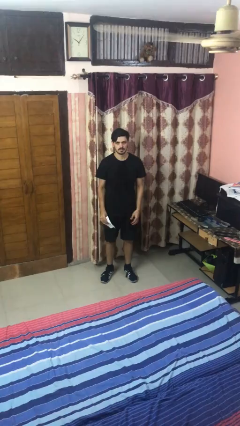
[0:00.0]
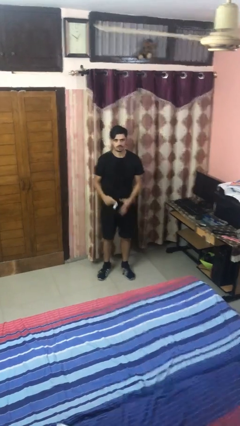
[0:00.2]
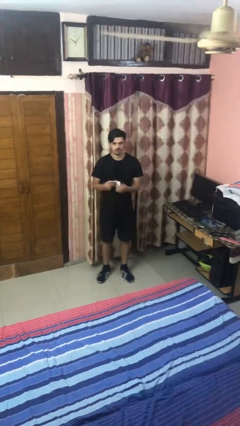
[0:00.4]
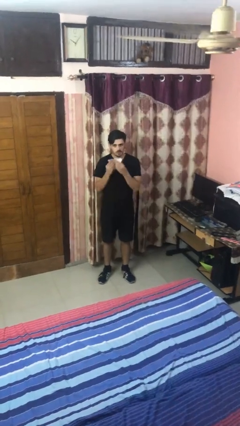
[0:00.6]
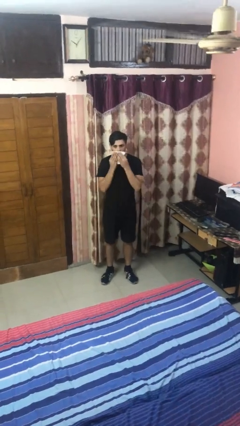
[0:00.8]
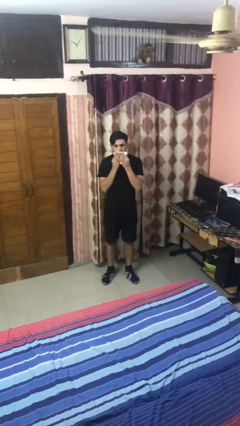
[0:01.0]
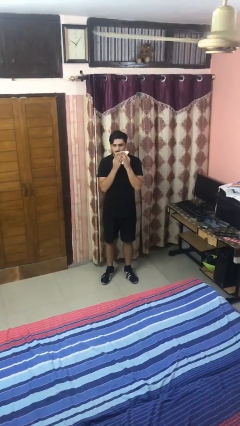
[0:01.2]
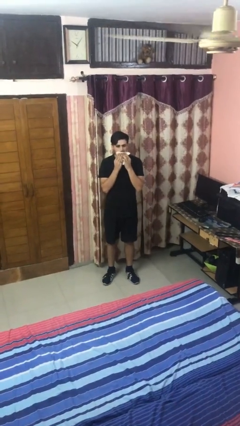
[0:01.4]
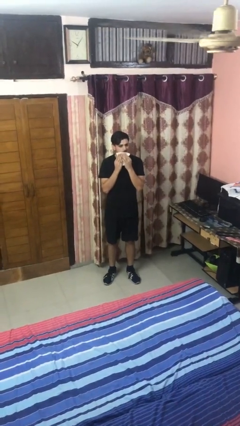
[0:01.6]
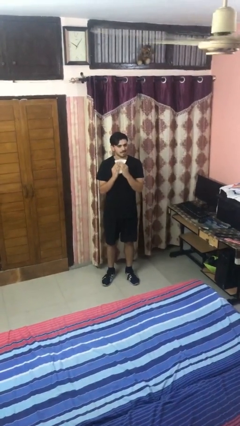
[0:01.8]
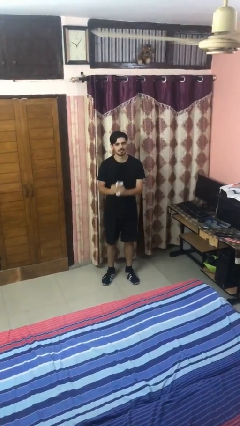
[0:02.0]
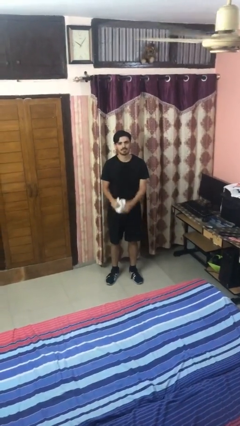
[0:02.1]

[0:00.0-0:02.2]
person wipes mouth with napkin

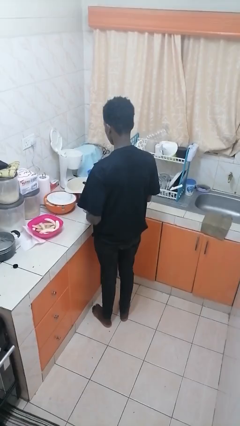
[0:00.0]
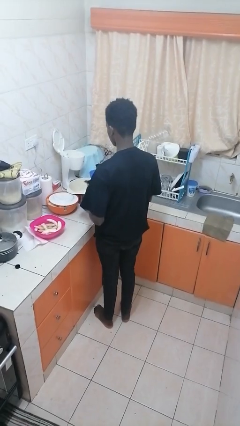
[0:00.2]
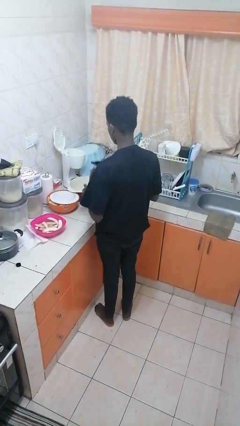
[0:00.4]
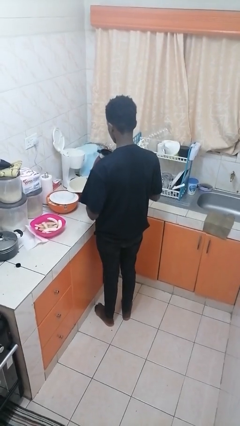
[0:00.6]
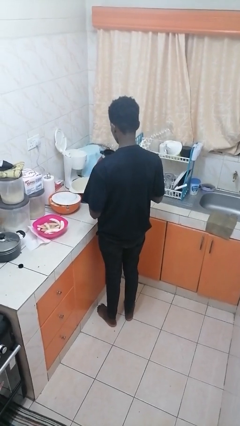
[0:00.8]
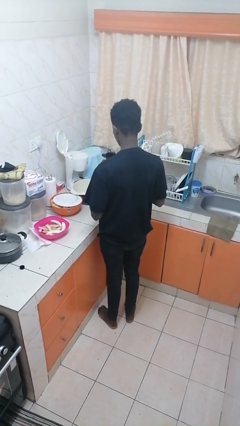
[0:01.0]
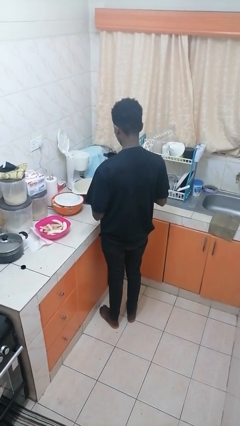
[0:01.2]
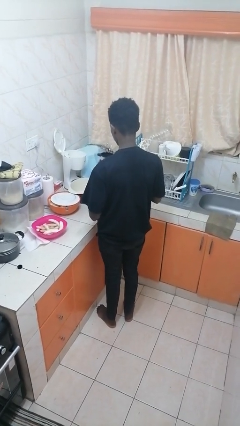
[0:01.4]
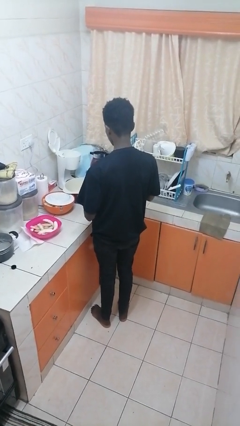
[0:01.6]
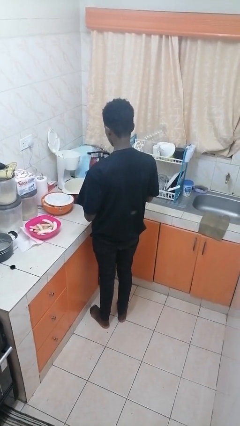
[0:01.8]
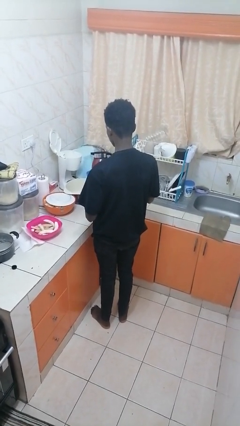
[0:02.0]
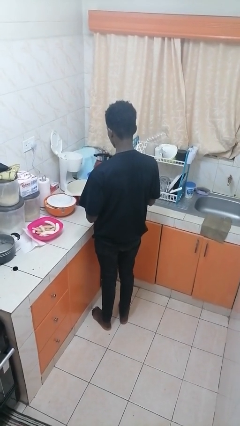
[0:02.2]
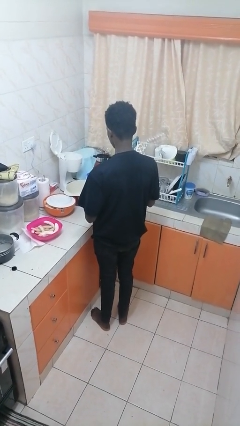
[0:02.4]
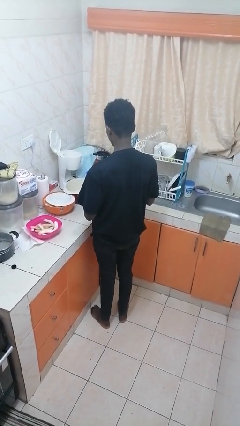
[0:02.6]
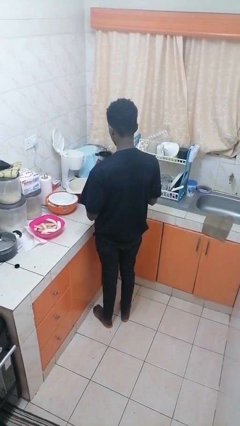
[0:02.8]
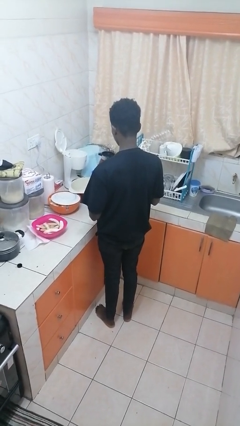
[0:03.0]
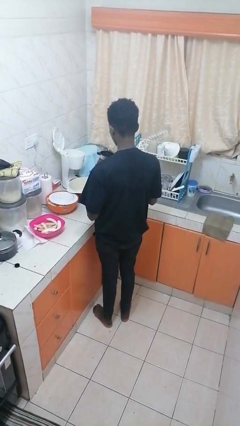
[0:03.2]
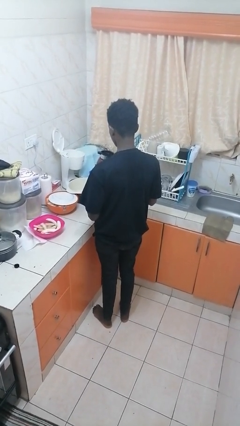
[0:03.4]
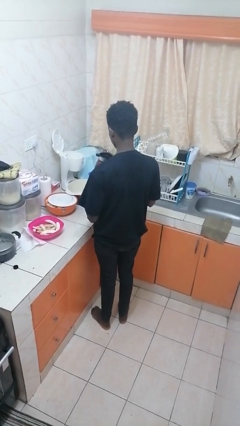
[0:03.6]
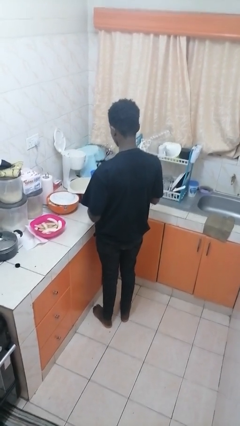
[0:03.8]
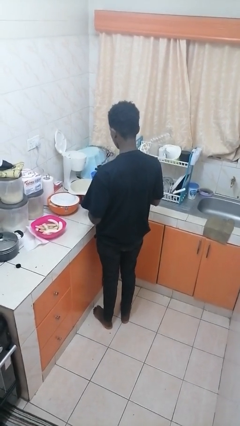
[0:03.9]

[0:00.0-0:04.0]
person picks up object from countertop

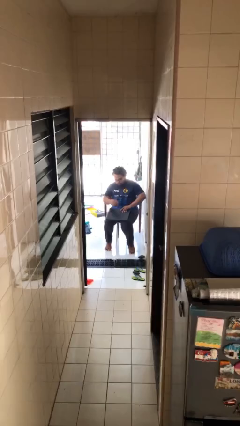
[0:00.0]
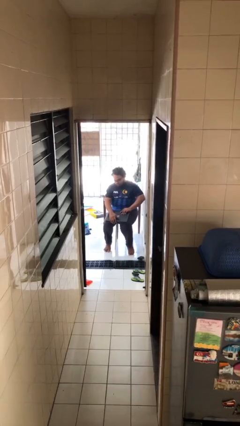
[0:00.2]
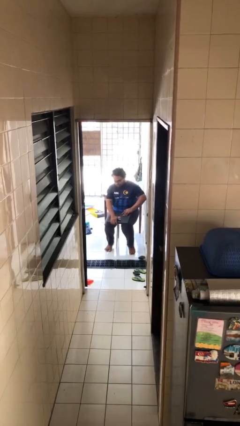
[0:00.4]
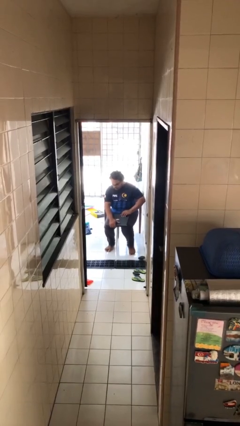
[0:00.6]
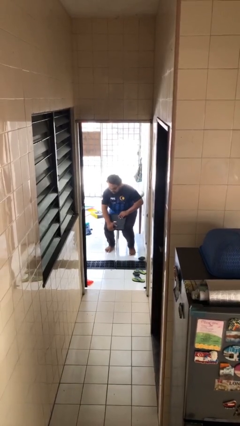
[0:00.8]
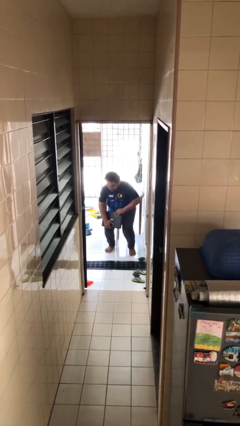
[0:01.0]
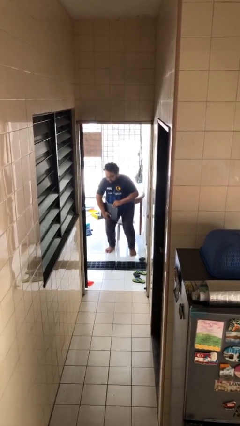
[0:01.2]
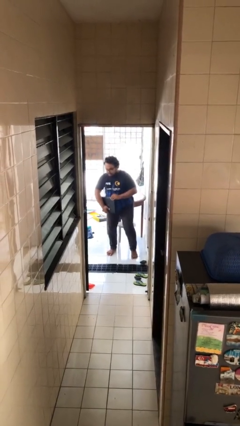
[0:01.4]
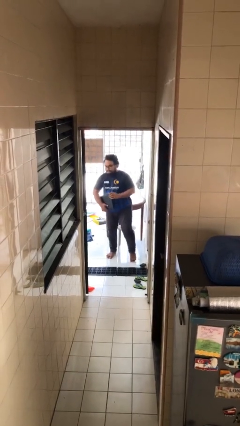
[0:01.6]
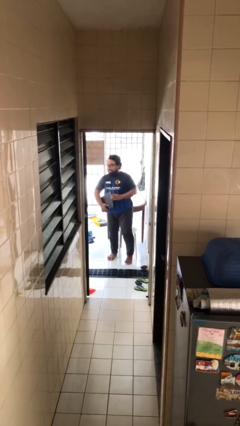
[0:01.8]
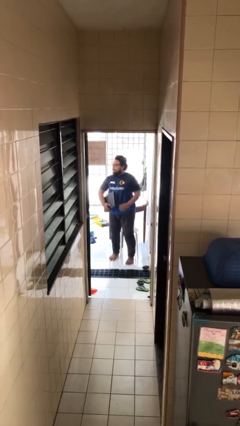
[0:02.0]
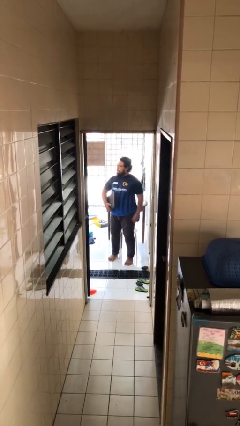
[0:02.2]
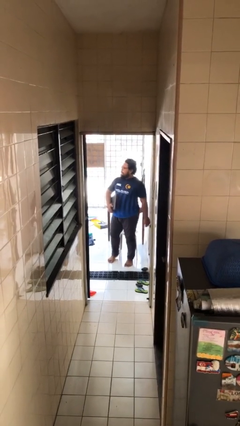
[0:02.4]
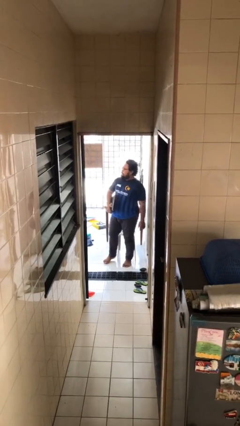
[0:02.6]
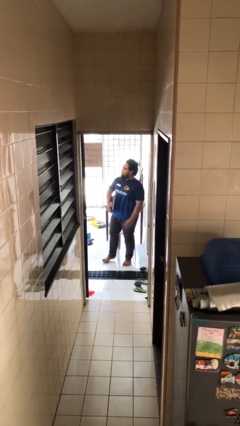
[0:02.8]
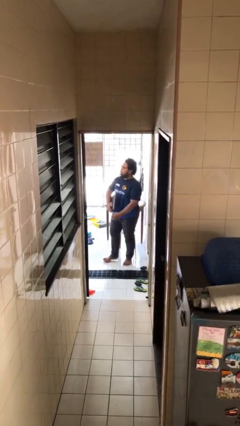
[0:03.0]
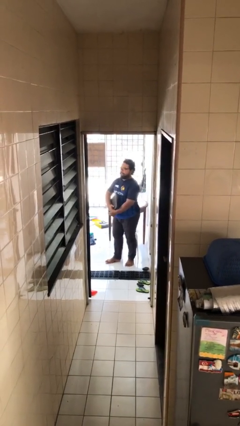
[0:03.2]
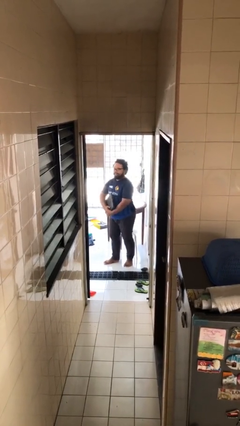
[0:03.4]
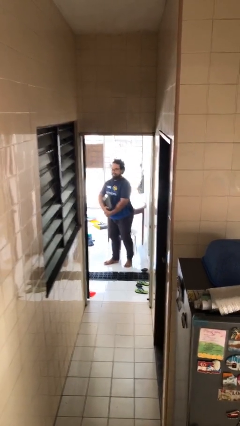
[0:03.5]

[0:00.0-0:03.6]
person stands up

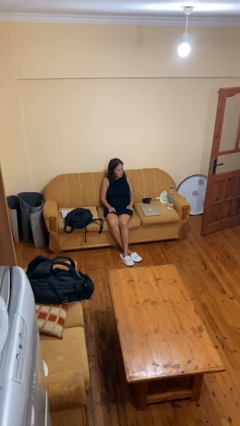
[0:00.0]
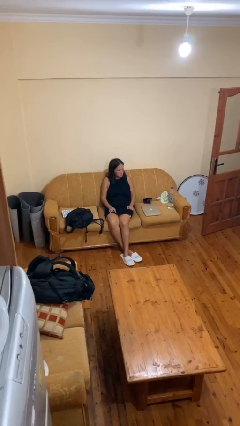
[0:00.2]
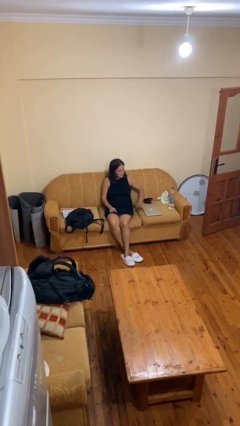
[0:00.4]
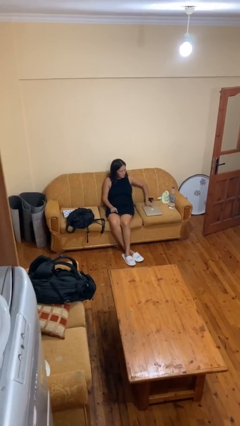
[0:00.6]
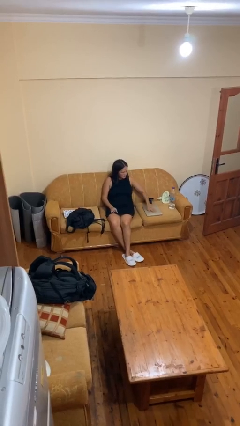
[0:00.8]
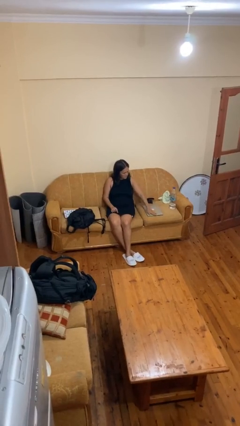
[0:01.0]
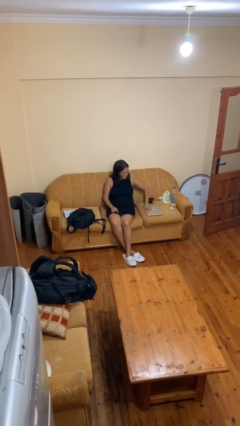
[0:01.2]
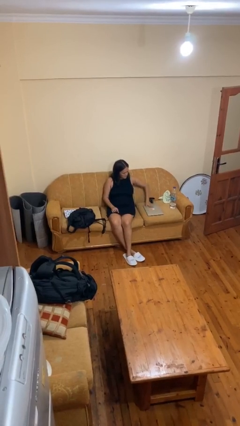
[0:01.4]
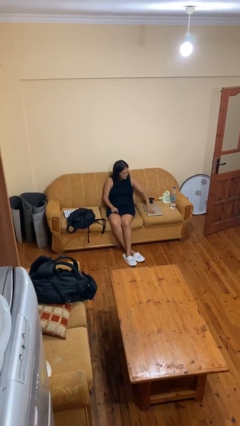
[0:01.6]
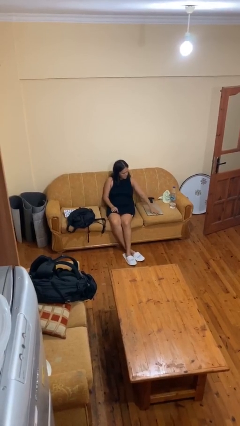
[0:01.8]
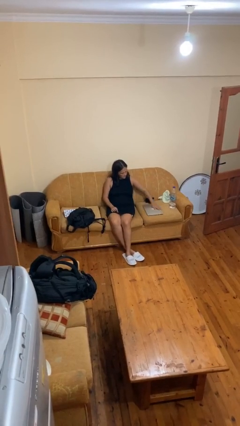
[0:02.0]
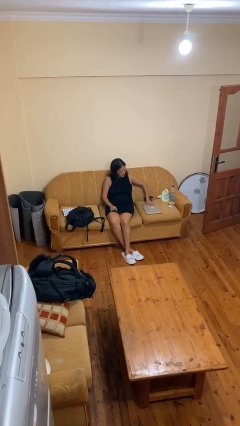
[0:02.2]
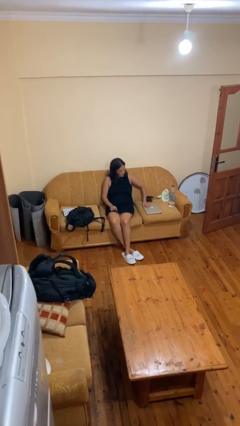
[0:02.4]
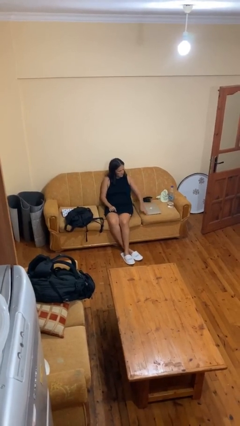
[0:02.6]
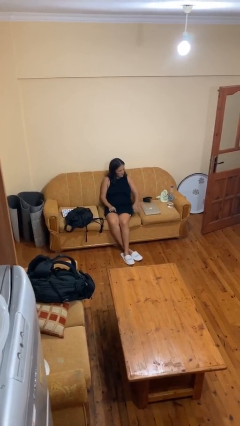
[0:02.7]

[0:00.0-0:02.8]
person waves hand over object

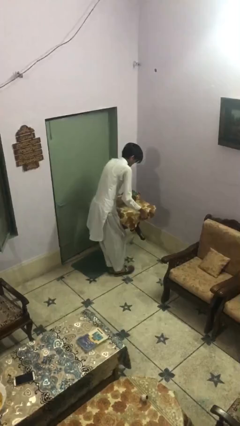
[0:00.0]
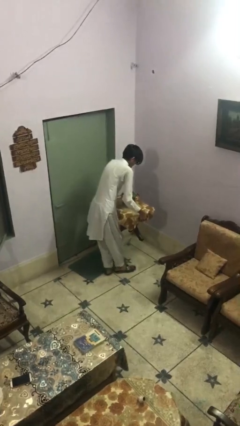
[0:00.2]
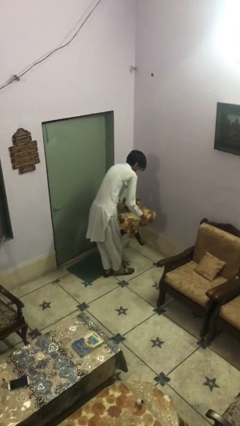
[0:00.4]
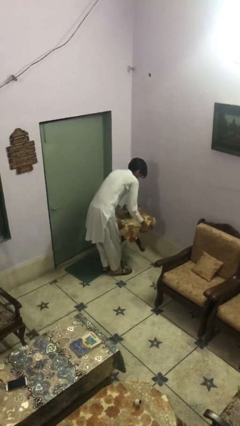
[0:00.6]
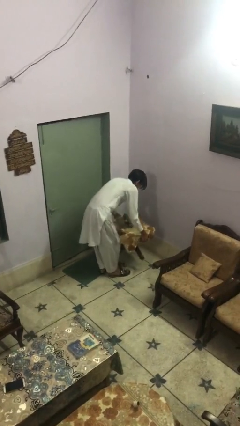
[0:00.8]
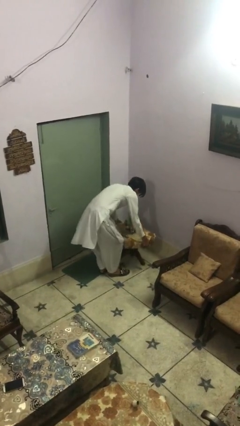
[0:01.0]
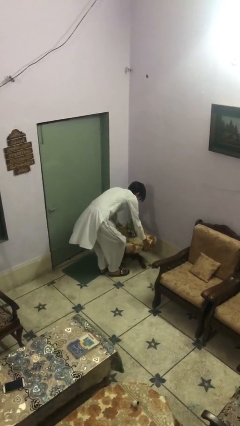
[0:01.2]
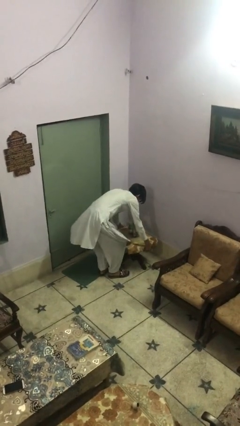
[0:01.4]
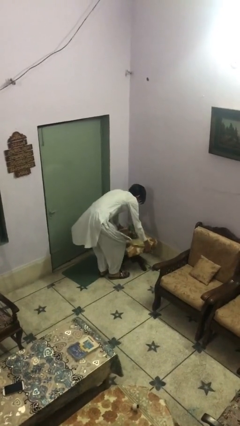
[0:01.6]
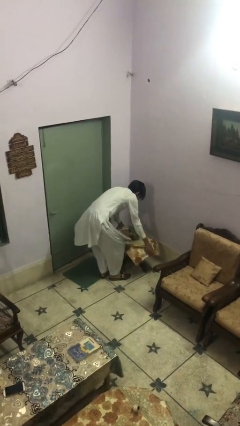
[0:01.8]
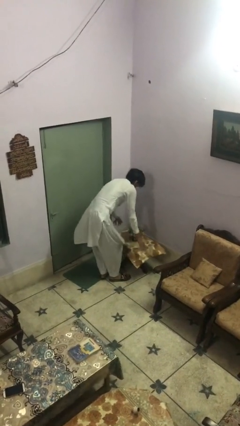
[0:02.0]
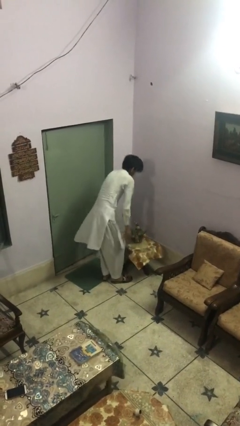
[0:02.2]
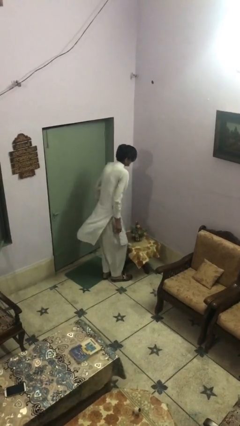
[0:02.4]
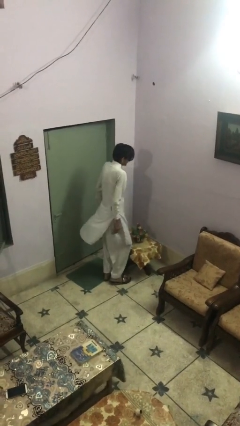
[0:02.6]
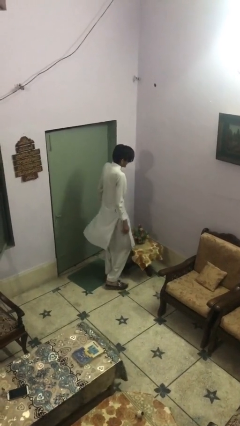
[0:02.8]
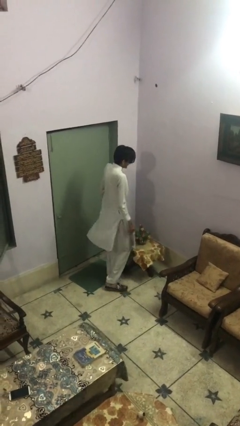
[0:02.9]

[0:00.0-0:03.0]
person puts down object on floor

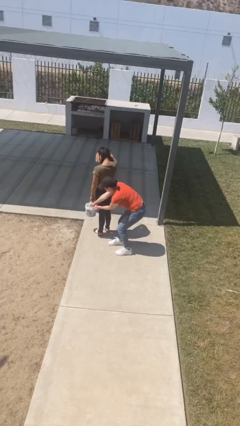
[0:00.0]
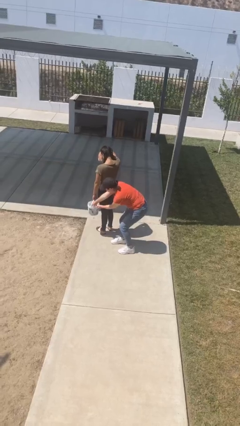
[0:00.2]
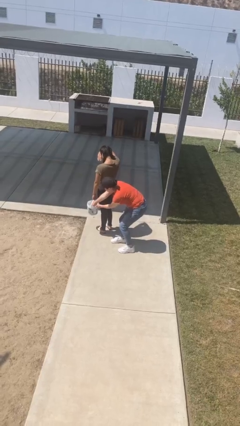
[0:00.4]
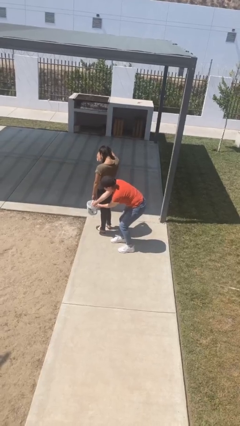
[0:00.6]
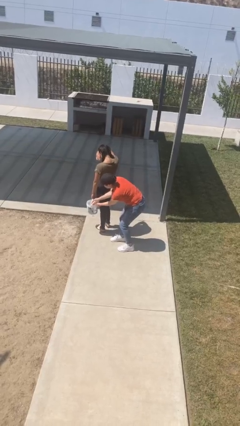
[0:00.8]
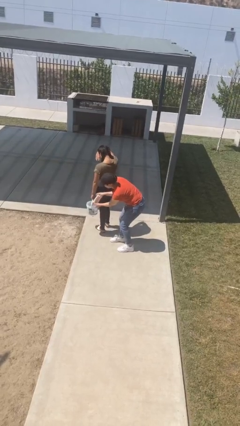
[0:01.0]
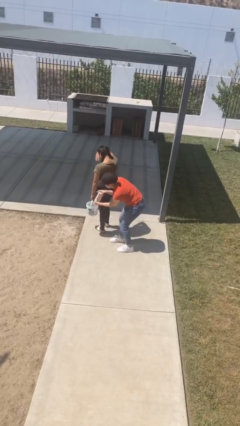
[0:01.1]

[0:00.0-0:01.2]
person steals object from person

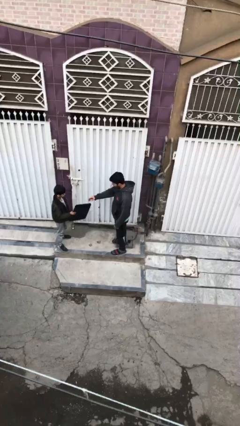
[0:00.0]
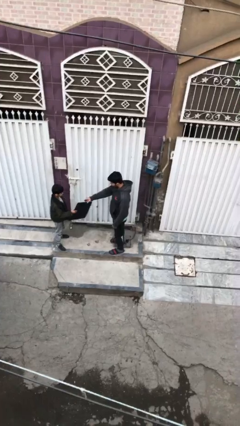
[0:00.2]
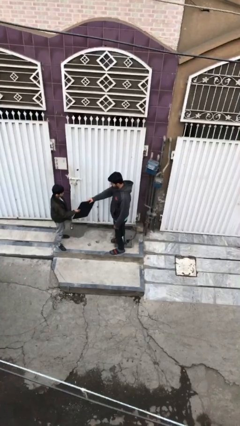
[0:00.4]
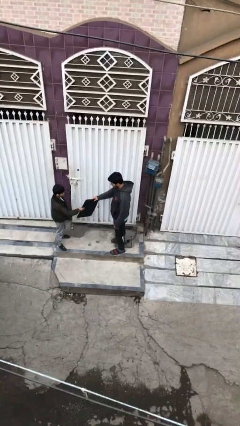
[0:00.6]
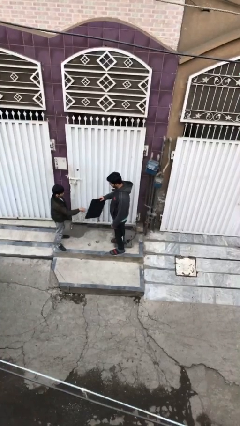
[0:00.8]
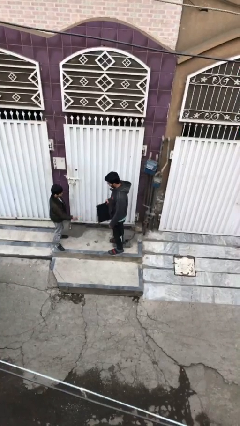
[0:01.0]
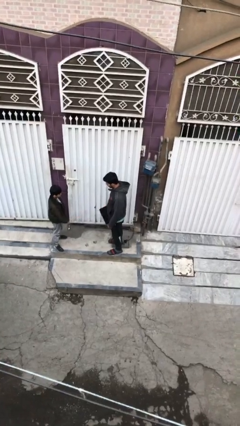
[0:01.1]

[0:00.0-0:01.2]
person transfers object to person
